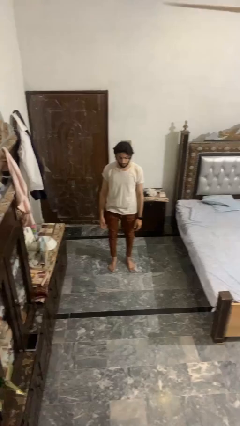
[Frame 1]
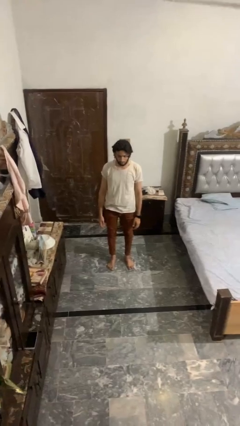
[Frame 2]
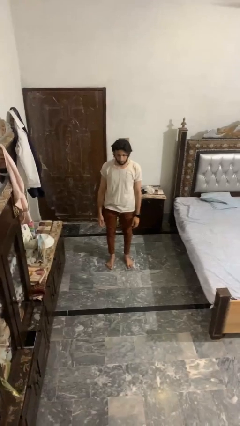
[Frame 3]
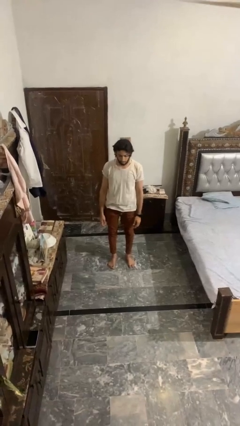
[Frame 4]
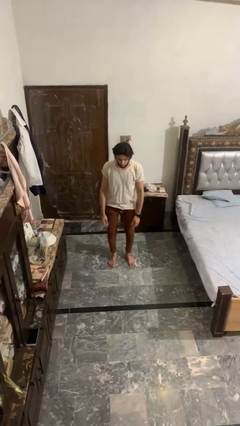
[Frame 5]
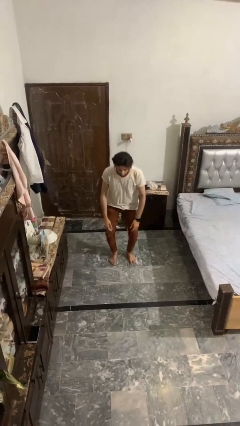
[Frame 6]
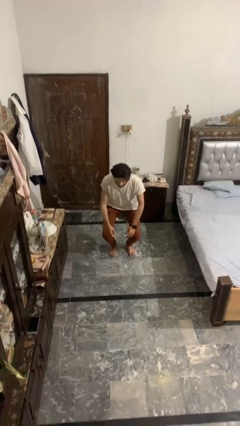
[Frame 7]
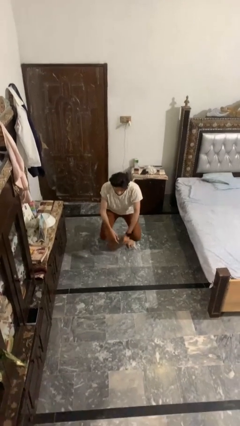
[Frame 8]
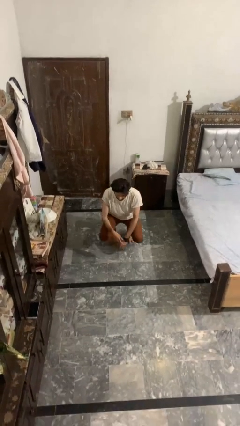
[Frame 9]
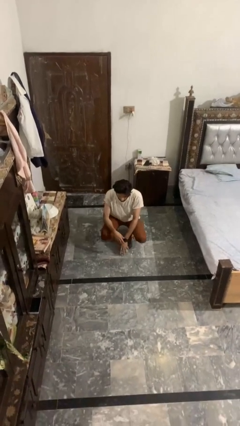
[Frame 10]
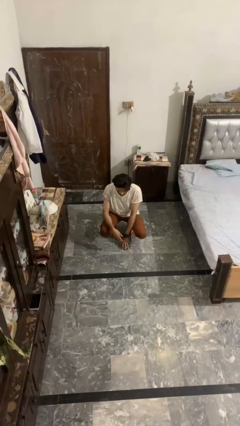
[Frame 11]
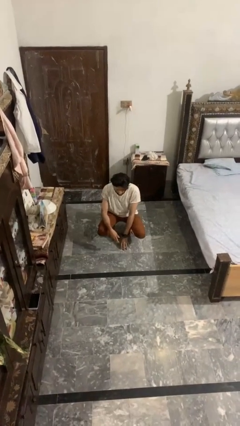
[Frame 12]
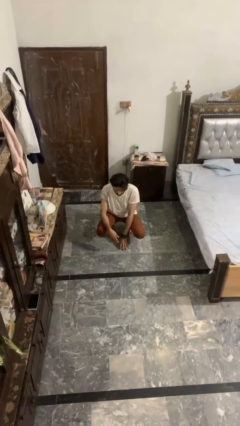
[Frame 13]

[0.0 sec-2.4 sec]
person squats

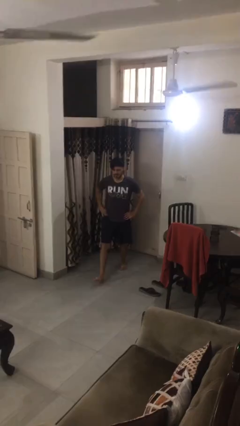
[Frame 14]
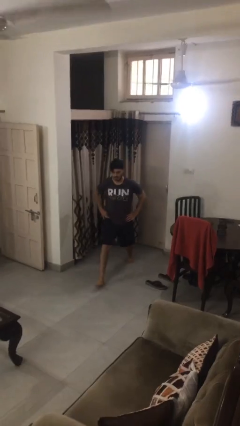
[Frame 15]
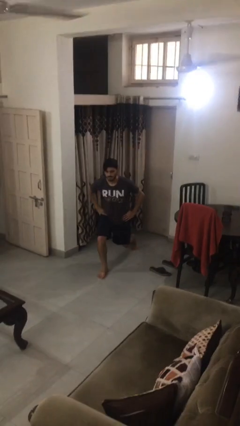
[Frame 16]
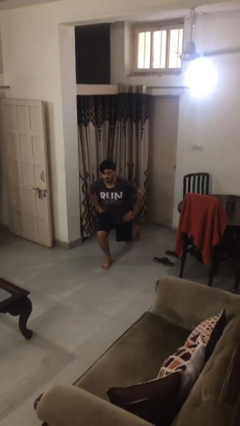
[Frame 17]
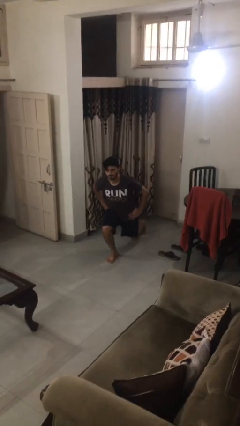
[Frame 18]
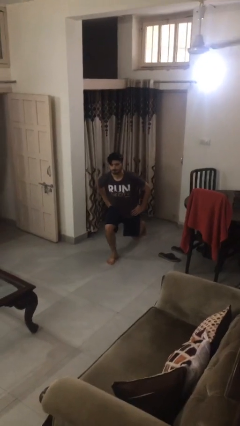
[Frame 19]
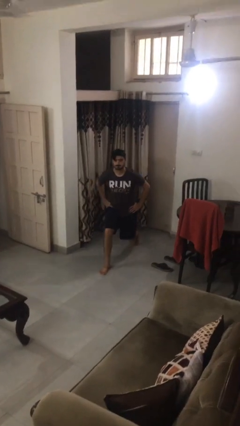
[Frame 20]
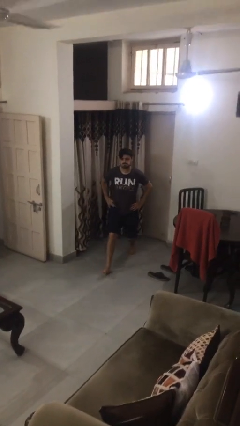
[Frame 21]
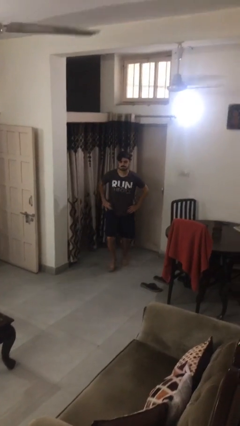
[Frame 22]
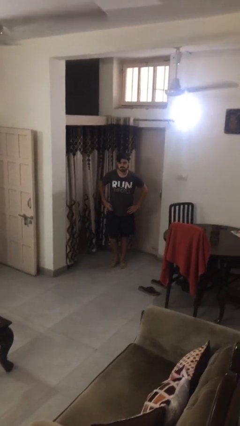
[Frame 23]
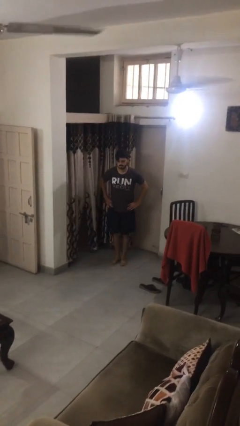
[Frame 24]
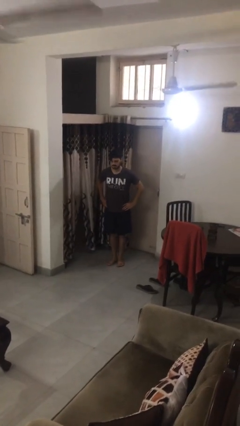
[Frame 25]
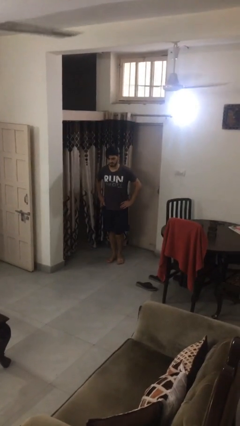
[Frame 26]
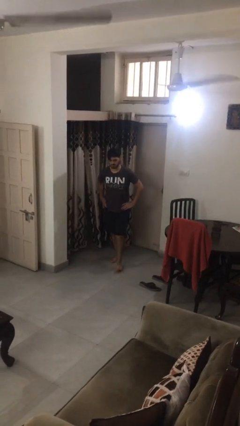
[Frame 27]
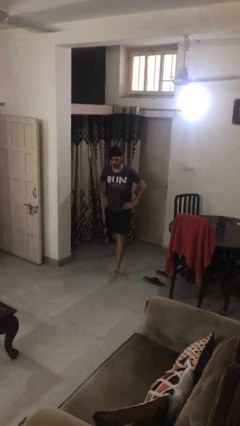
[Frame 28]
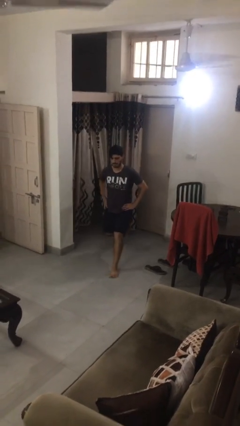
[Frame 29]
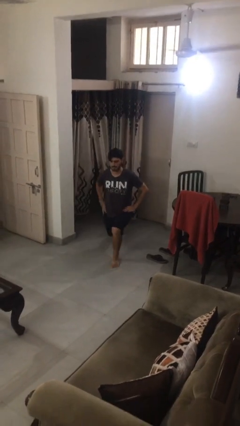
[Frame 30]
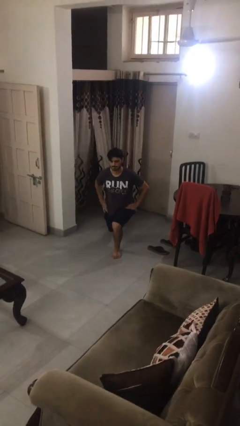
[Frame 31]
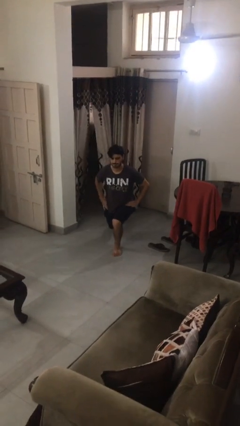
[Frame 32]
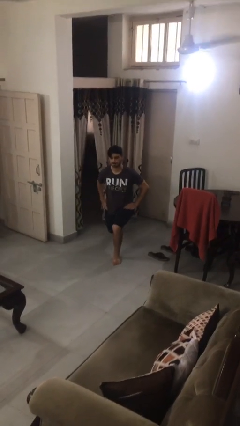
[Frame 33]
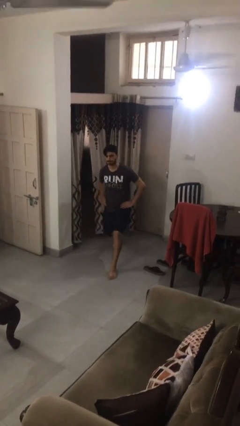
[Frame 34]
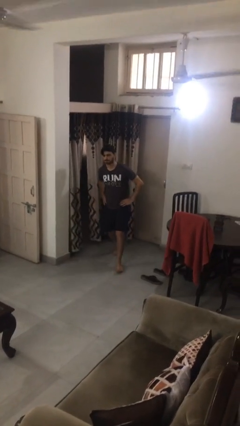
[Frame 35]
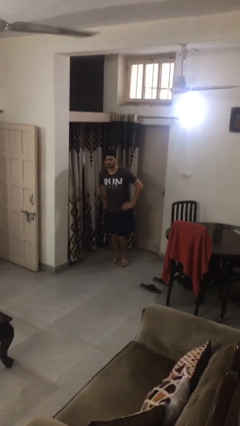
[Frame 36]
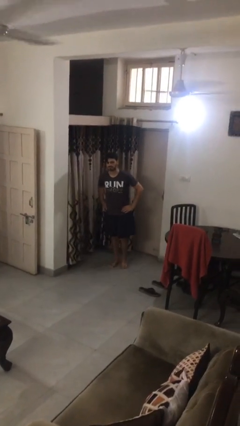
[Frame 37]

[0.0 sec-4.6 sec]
person exercises with lunges

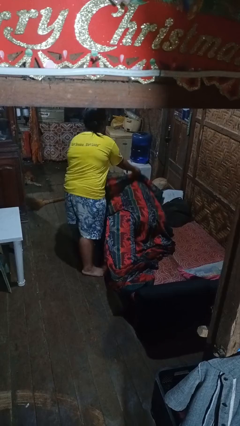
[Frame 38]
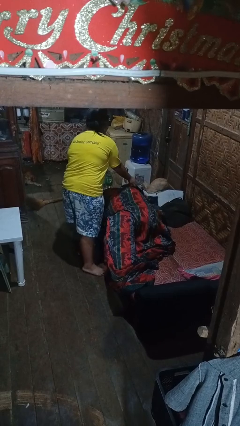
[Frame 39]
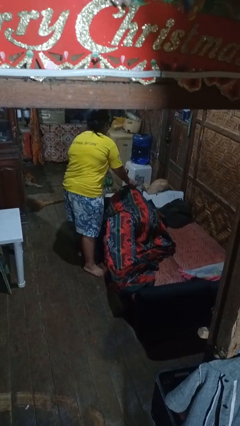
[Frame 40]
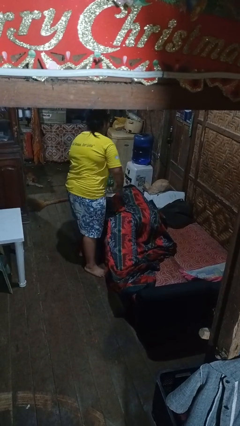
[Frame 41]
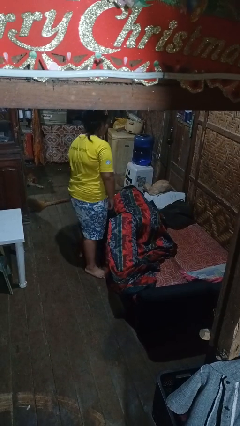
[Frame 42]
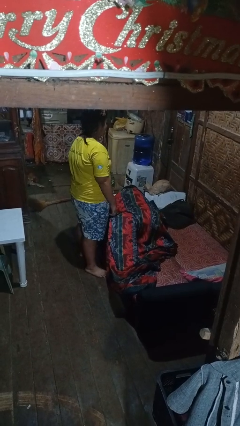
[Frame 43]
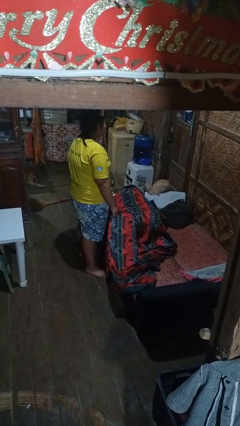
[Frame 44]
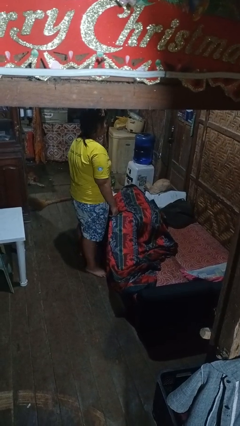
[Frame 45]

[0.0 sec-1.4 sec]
person covers friend with blanket

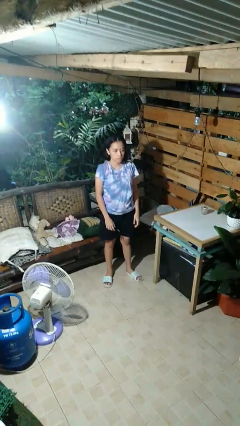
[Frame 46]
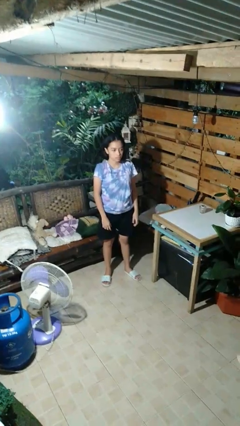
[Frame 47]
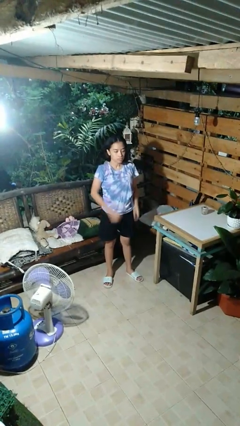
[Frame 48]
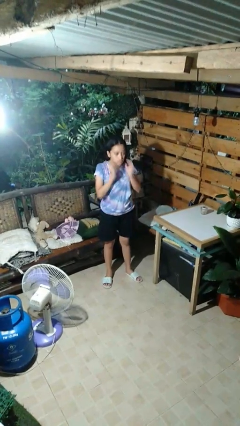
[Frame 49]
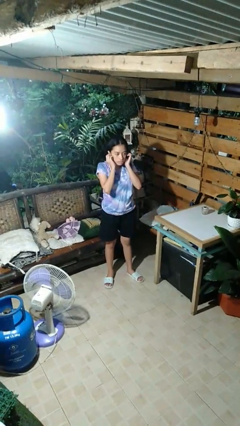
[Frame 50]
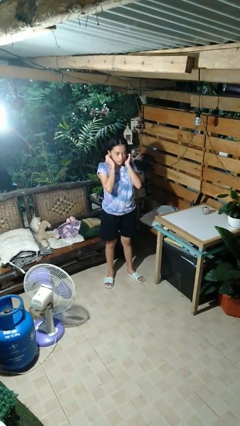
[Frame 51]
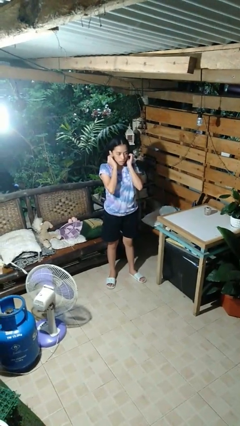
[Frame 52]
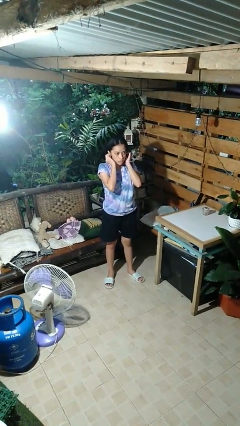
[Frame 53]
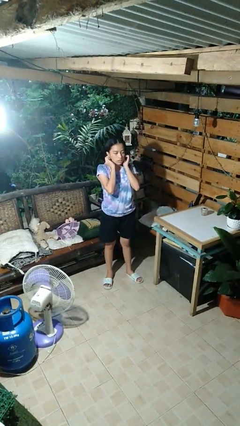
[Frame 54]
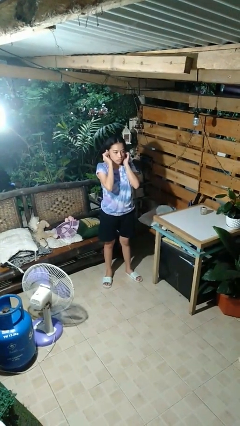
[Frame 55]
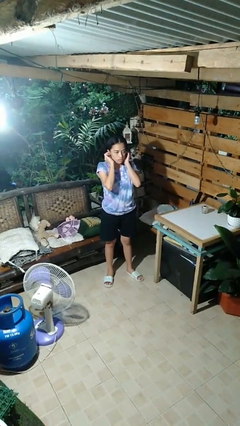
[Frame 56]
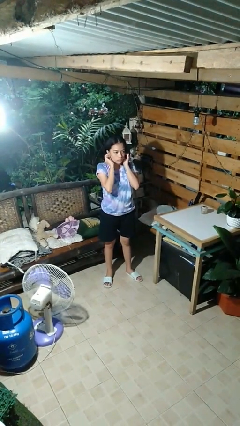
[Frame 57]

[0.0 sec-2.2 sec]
person touches earlobe

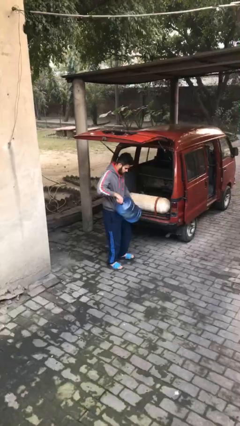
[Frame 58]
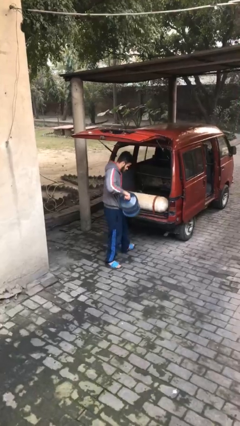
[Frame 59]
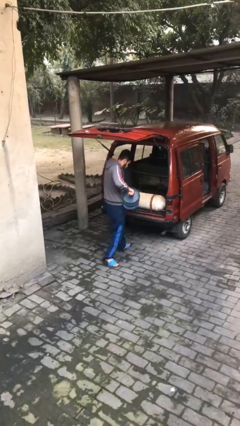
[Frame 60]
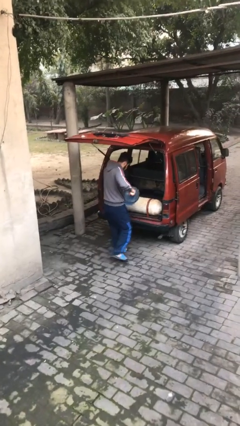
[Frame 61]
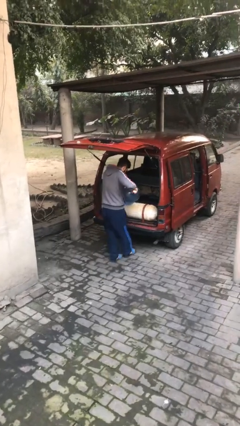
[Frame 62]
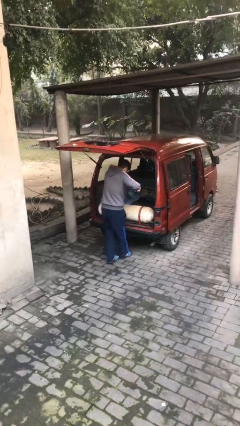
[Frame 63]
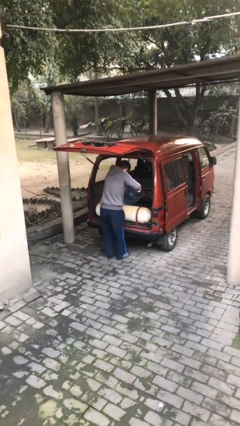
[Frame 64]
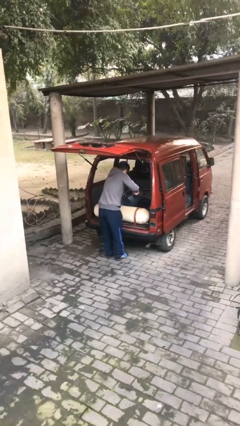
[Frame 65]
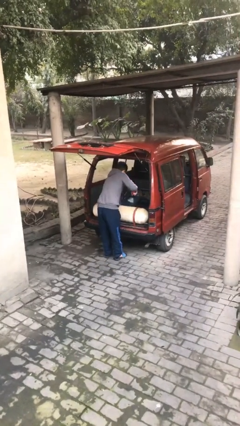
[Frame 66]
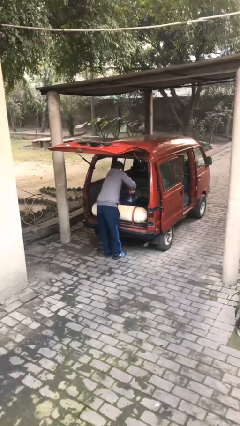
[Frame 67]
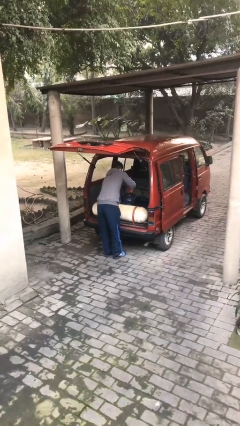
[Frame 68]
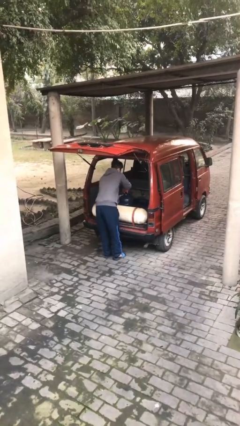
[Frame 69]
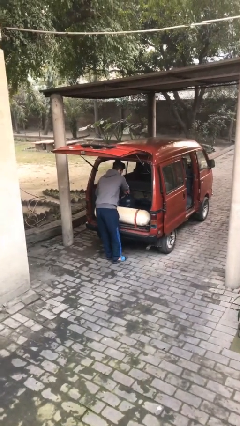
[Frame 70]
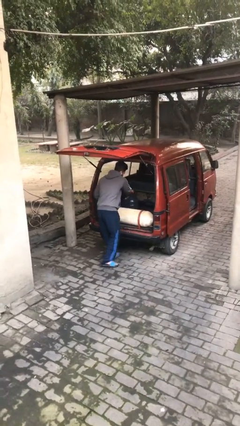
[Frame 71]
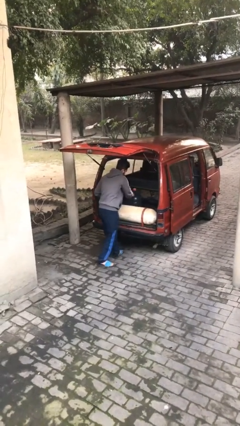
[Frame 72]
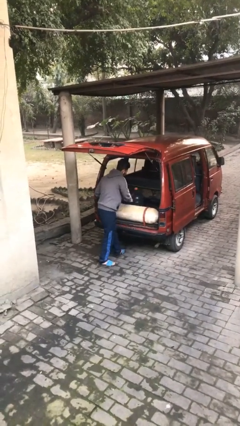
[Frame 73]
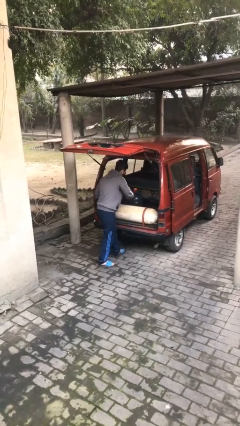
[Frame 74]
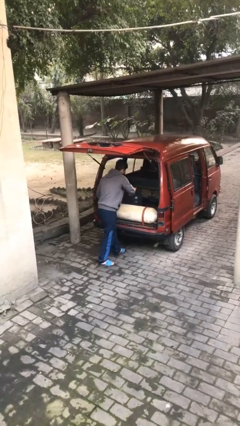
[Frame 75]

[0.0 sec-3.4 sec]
person loads car

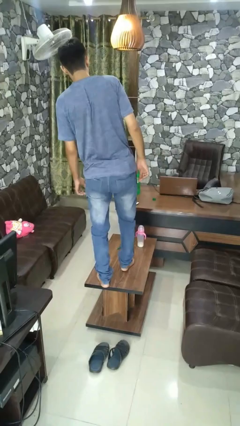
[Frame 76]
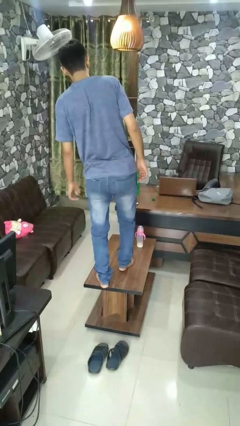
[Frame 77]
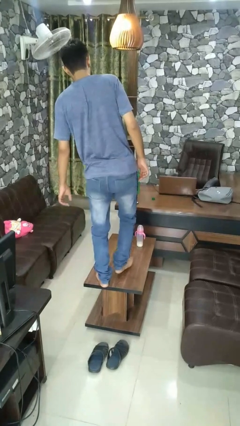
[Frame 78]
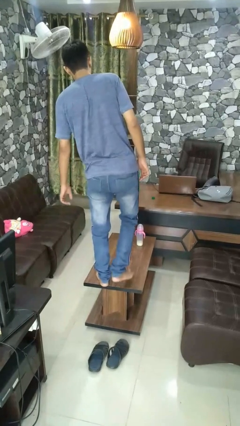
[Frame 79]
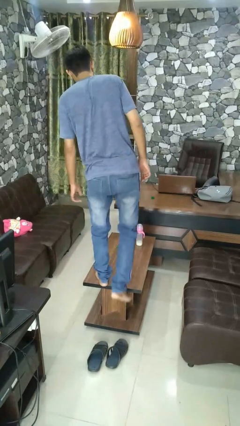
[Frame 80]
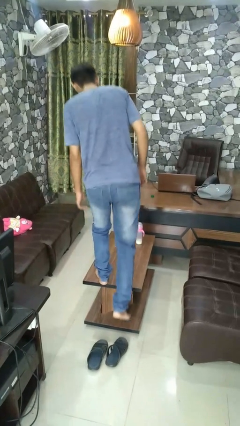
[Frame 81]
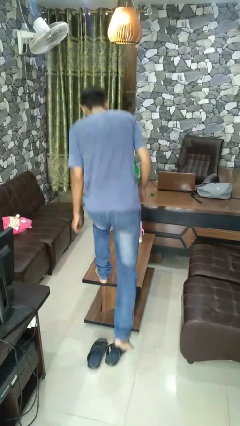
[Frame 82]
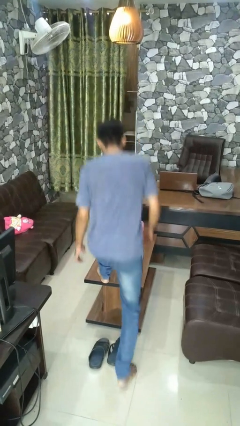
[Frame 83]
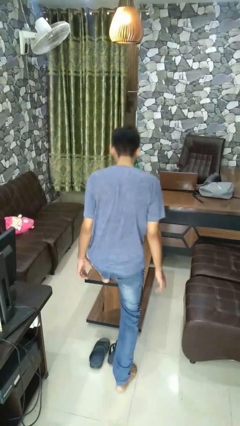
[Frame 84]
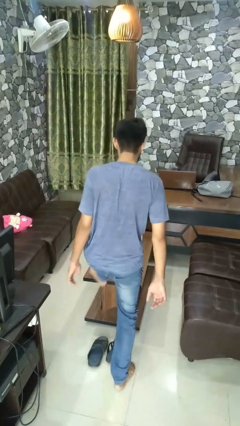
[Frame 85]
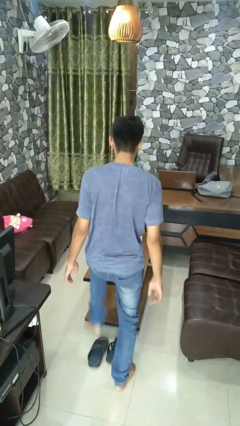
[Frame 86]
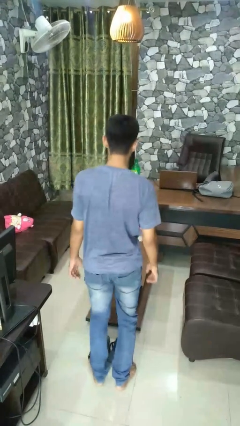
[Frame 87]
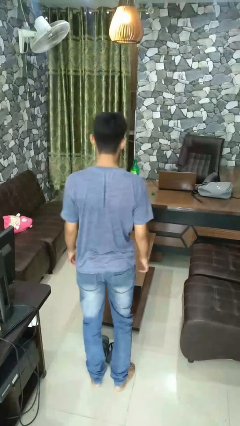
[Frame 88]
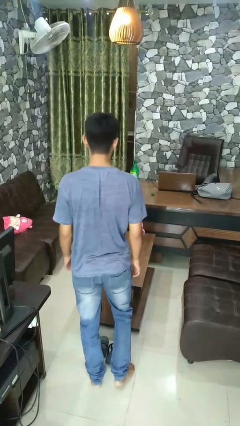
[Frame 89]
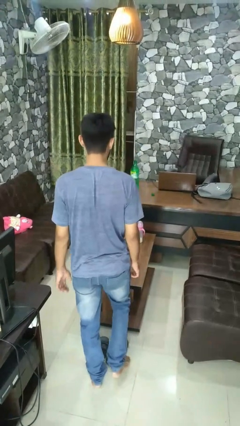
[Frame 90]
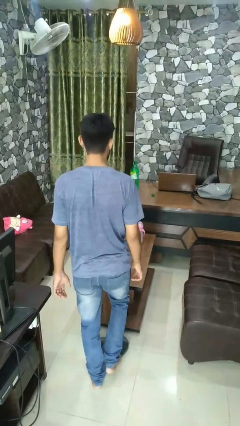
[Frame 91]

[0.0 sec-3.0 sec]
person climbs off table

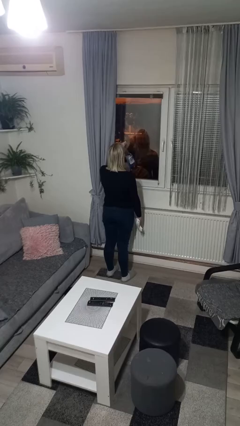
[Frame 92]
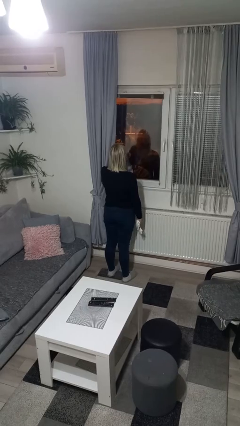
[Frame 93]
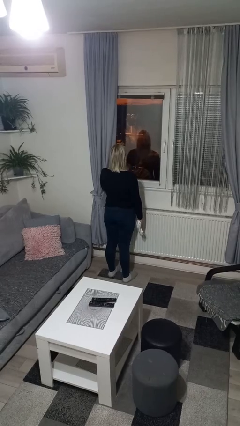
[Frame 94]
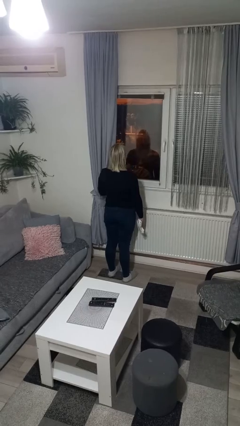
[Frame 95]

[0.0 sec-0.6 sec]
person sprays from bottle
